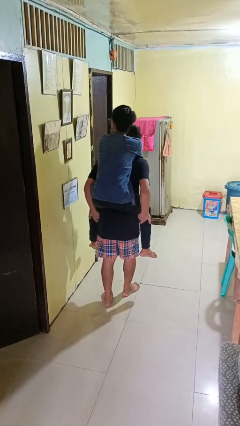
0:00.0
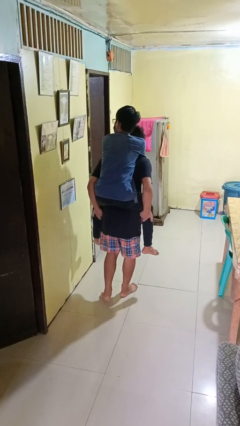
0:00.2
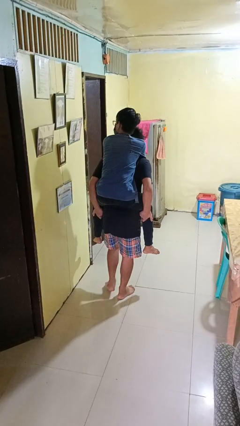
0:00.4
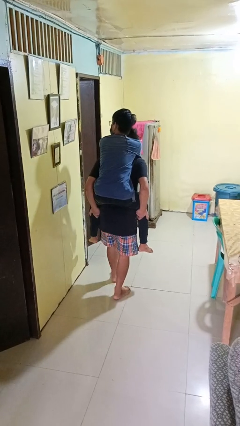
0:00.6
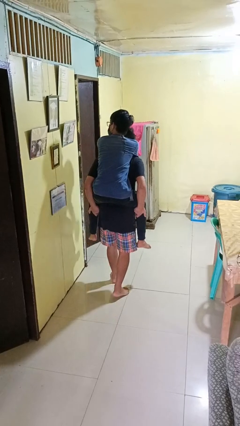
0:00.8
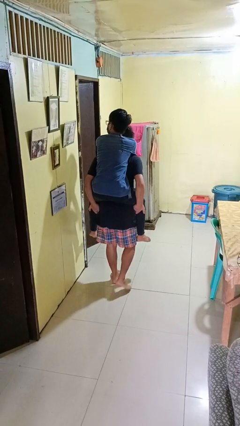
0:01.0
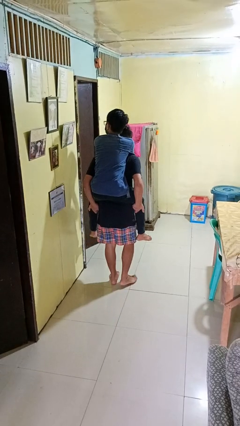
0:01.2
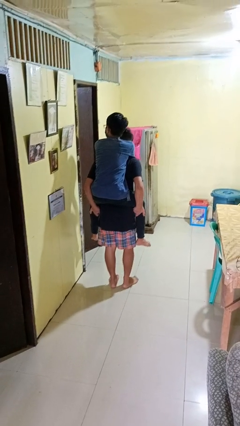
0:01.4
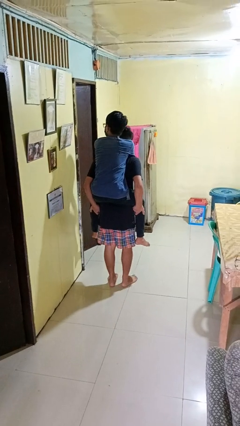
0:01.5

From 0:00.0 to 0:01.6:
person carries person on back

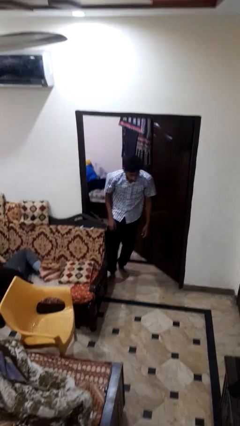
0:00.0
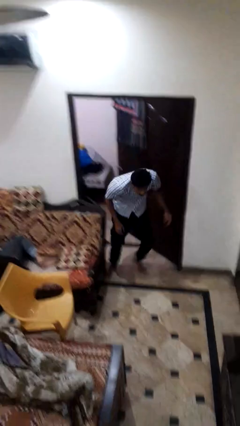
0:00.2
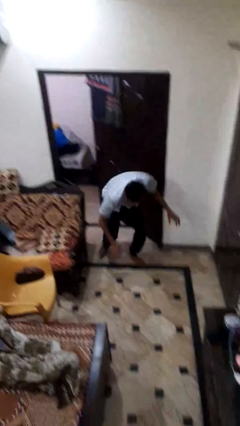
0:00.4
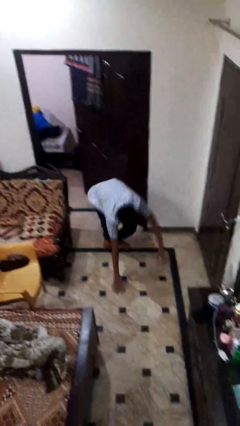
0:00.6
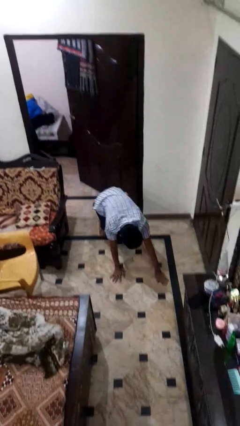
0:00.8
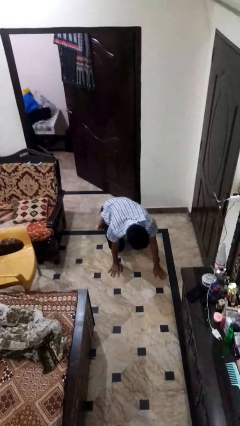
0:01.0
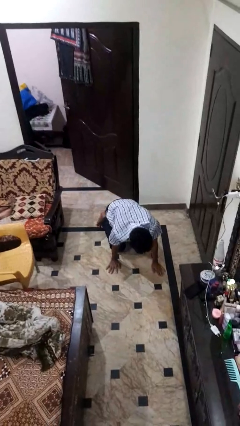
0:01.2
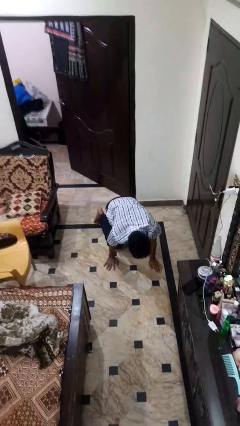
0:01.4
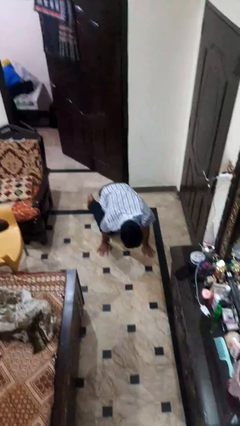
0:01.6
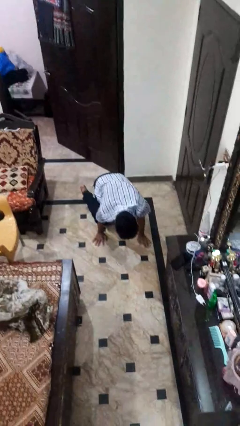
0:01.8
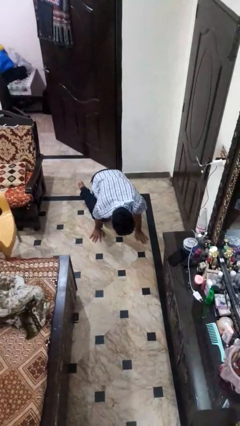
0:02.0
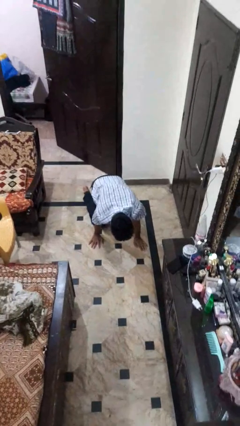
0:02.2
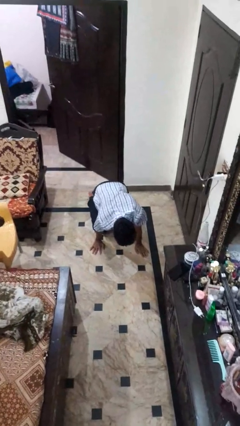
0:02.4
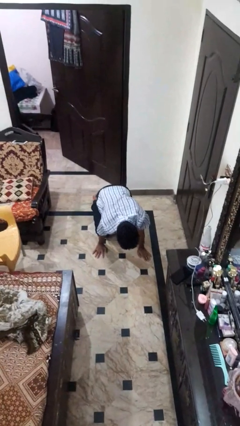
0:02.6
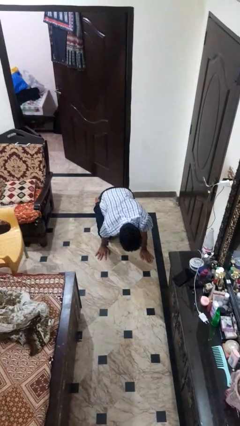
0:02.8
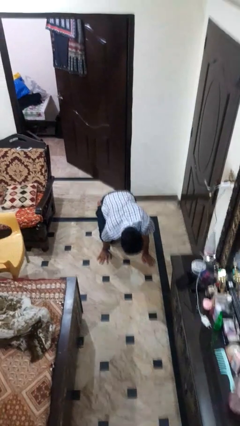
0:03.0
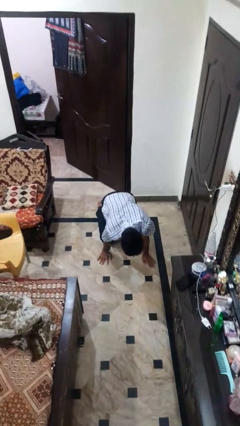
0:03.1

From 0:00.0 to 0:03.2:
person trips on object on floor

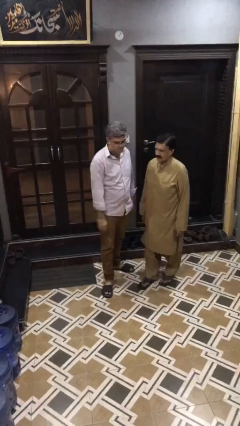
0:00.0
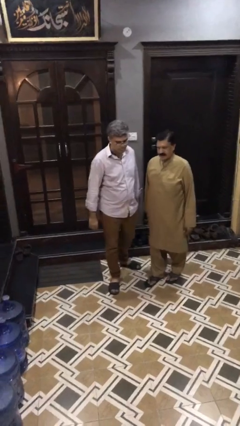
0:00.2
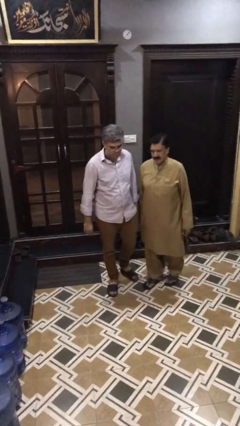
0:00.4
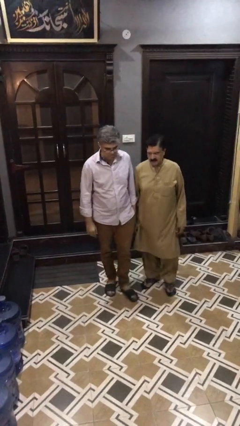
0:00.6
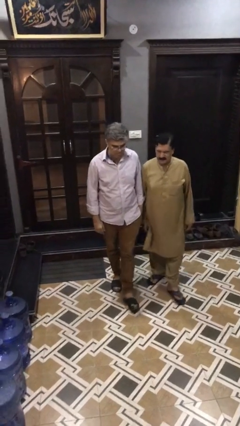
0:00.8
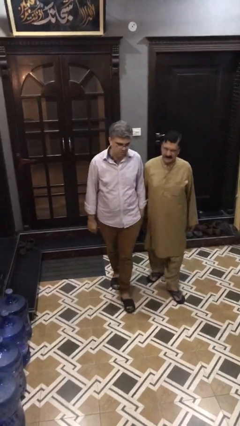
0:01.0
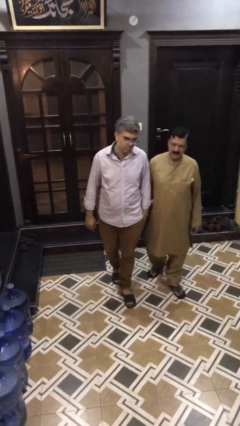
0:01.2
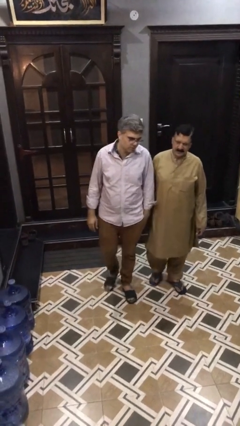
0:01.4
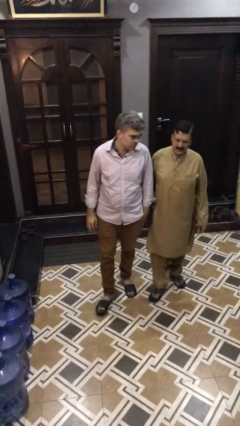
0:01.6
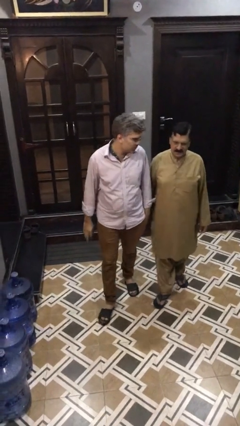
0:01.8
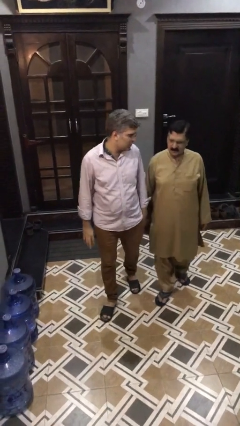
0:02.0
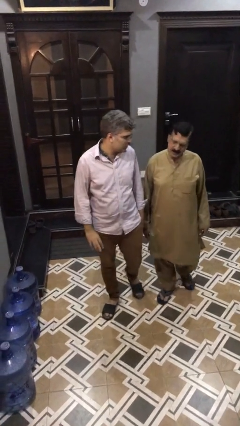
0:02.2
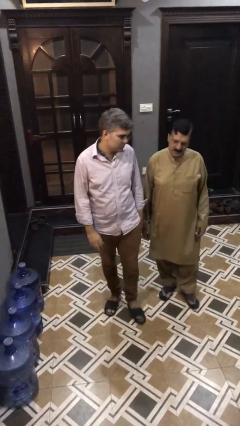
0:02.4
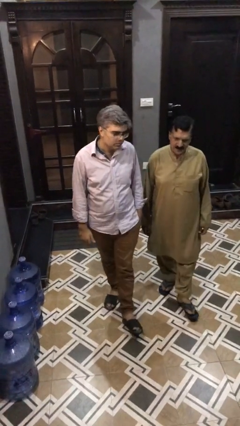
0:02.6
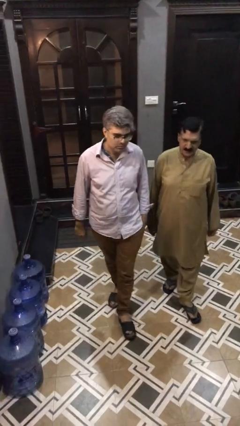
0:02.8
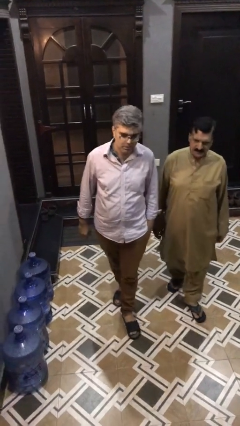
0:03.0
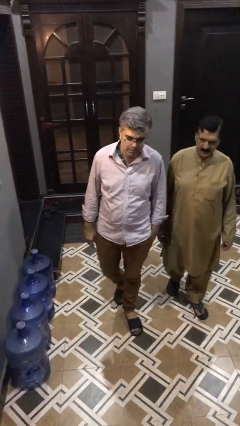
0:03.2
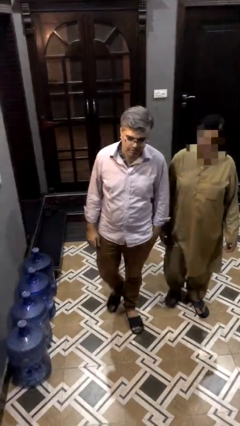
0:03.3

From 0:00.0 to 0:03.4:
person talks to person

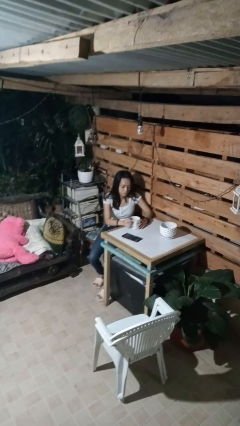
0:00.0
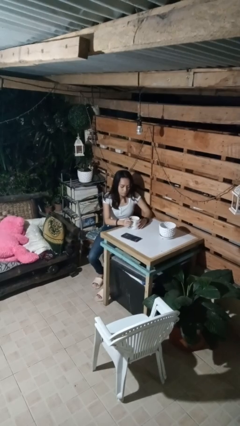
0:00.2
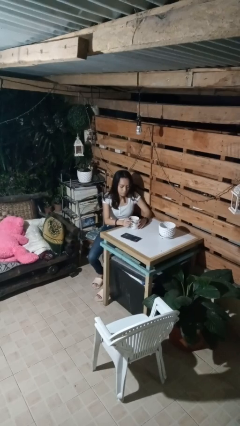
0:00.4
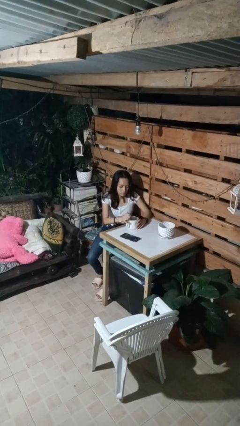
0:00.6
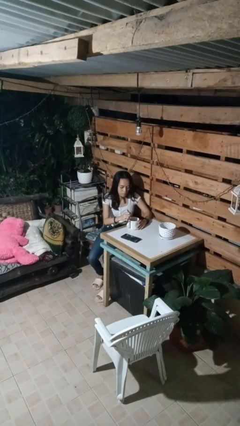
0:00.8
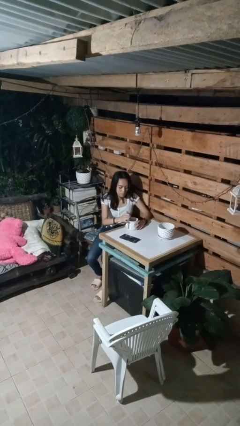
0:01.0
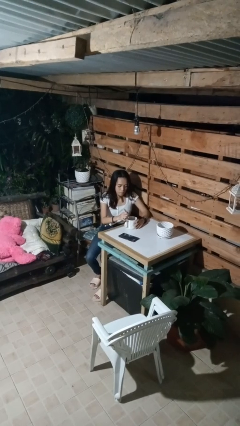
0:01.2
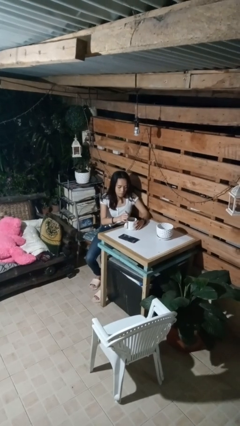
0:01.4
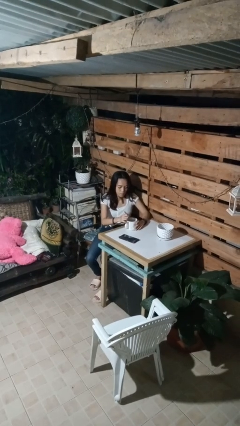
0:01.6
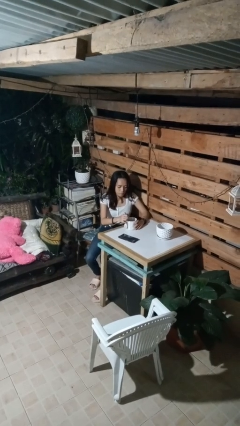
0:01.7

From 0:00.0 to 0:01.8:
person stirs mug

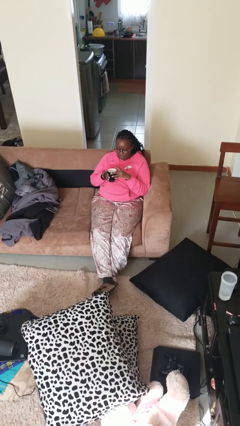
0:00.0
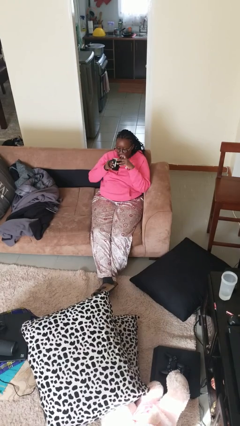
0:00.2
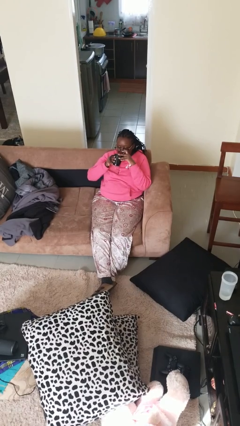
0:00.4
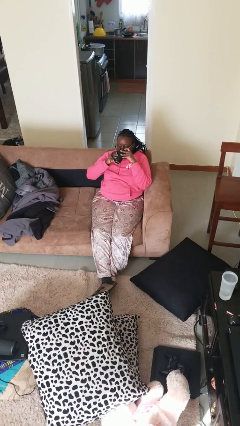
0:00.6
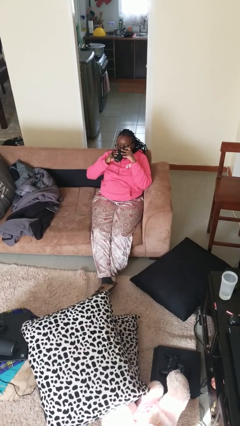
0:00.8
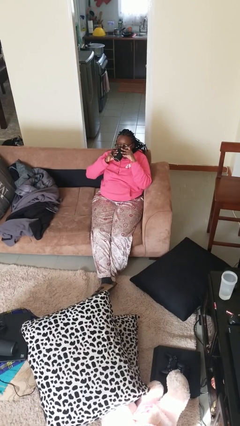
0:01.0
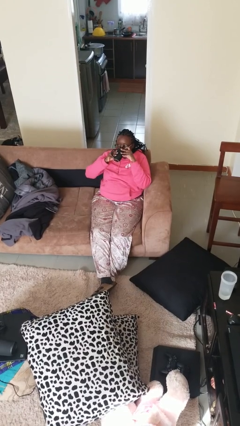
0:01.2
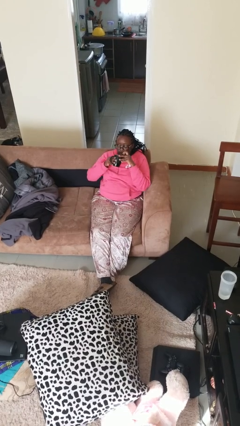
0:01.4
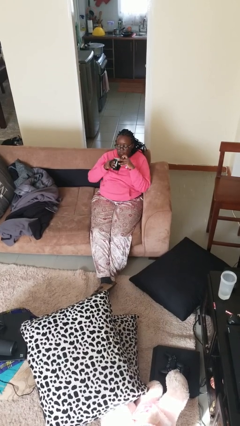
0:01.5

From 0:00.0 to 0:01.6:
person drinks from mug

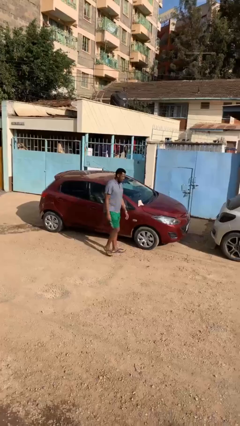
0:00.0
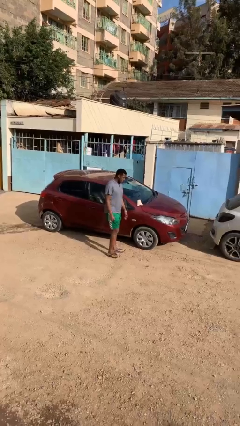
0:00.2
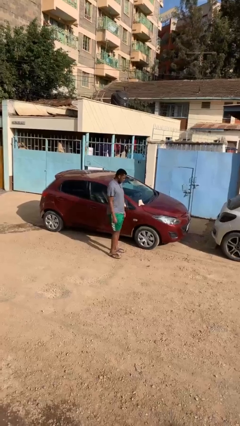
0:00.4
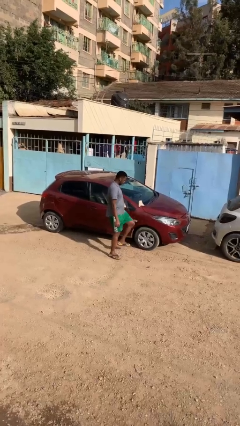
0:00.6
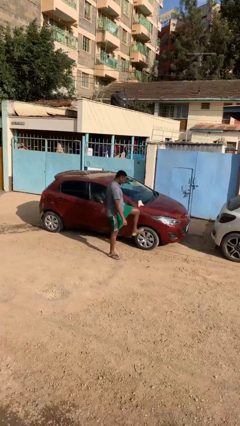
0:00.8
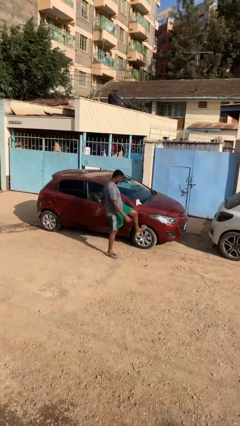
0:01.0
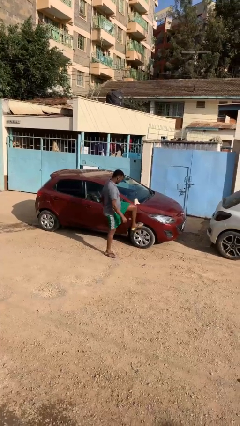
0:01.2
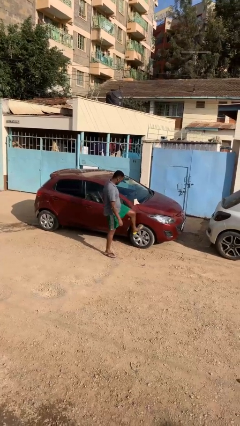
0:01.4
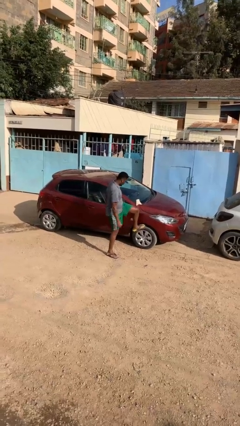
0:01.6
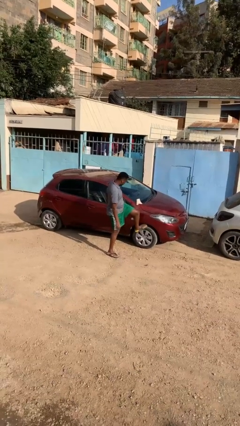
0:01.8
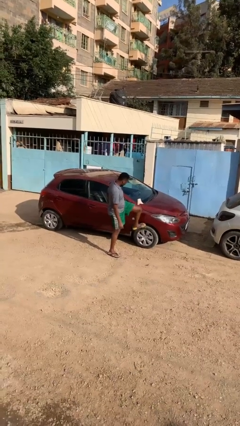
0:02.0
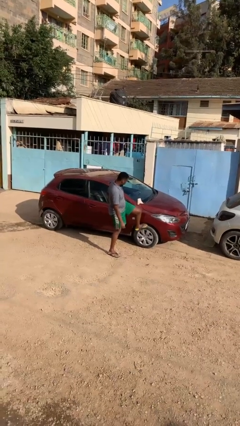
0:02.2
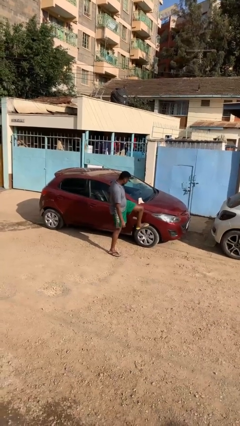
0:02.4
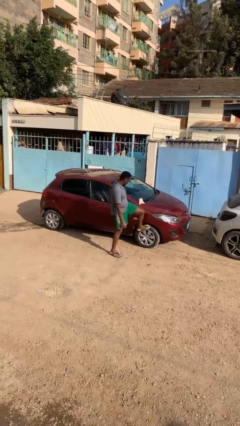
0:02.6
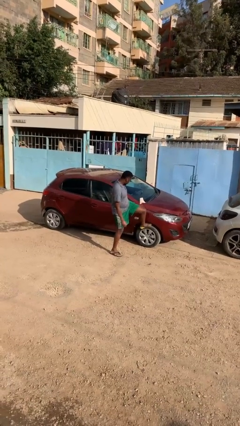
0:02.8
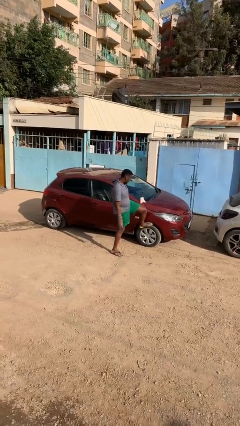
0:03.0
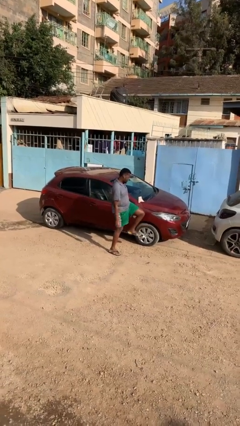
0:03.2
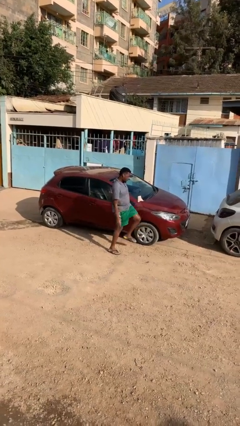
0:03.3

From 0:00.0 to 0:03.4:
person kicks car tires

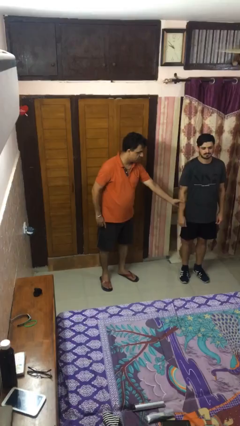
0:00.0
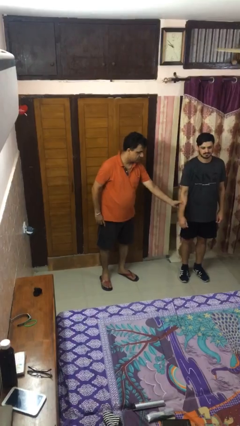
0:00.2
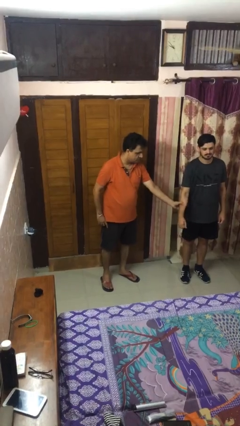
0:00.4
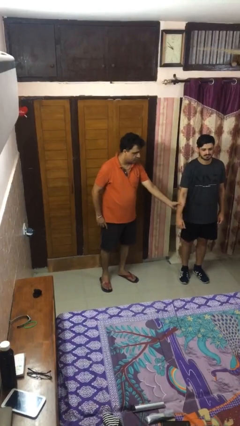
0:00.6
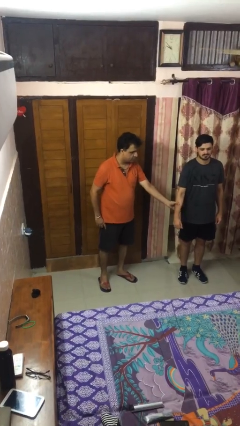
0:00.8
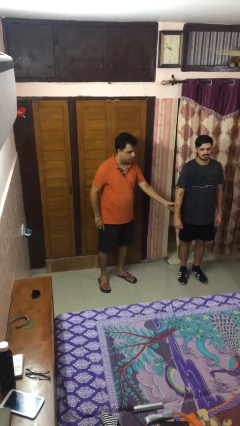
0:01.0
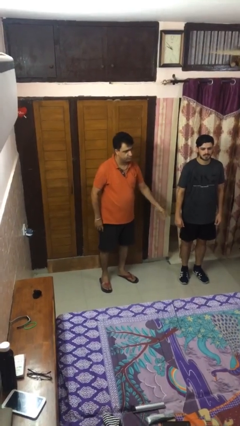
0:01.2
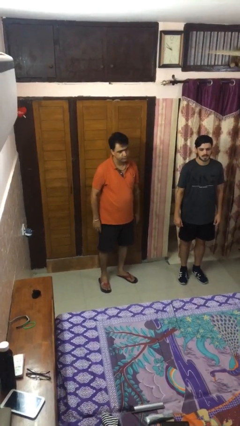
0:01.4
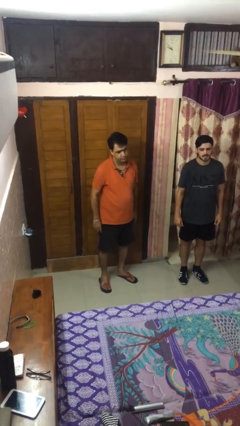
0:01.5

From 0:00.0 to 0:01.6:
person grabs person by forearm

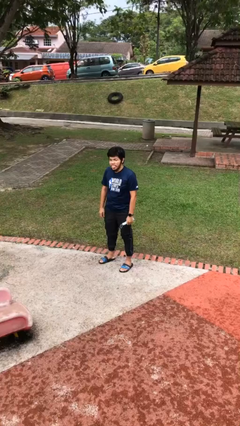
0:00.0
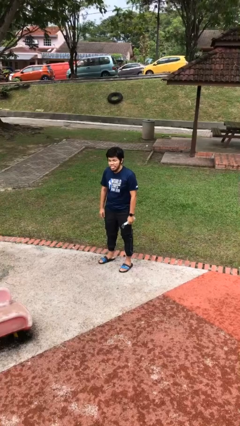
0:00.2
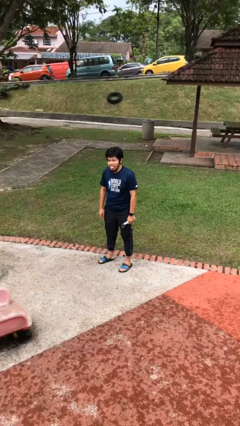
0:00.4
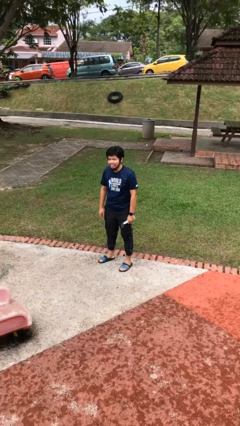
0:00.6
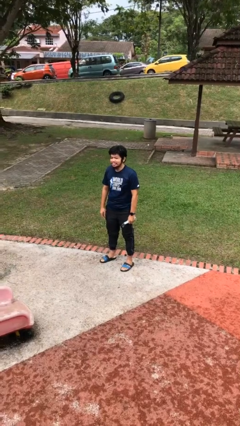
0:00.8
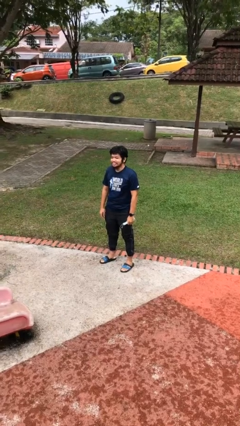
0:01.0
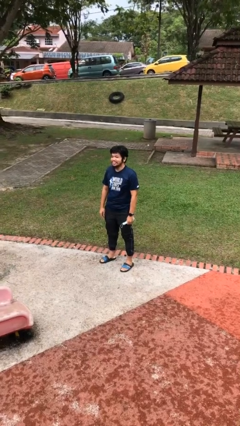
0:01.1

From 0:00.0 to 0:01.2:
person sticks out tongue
